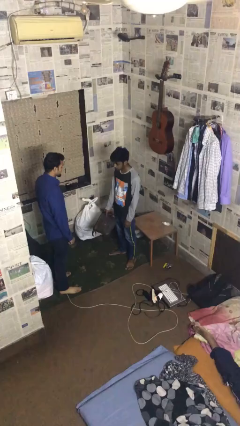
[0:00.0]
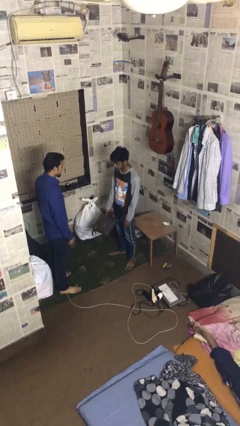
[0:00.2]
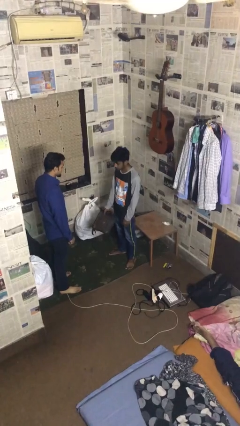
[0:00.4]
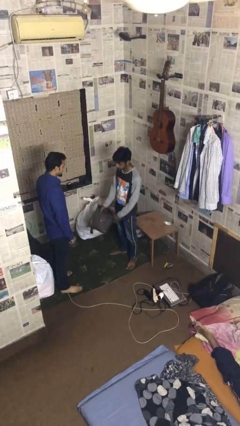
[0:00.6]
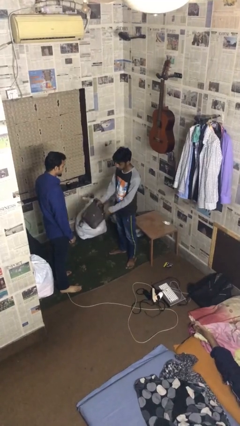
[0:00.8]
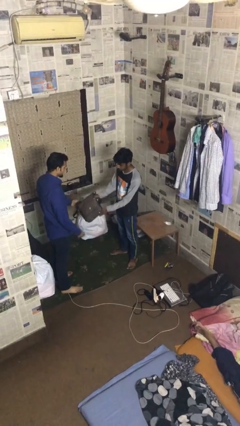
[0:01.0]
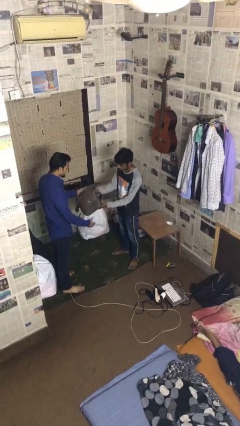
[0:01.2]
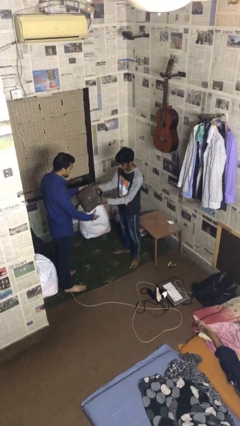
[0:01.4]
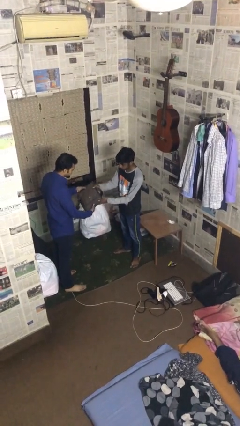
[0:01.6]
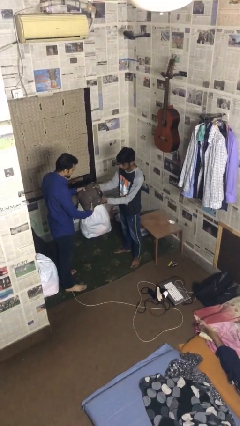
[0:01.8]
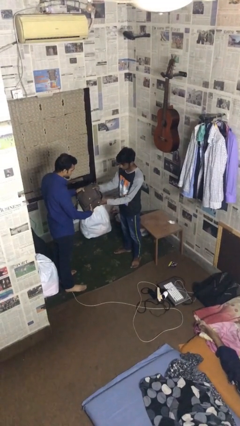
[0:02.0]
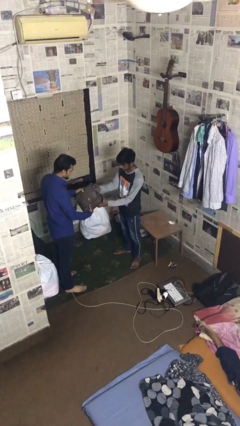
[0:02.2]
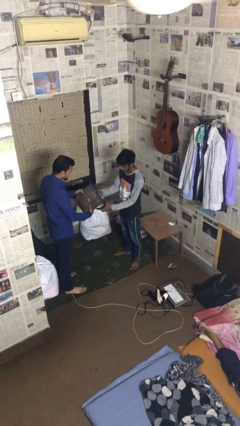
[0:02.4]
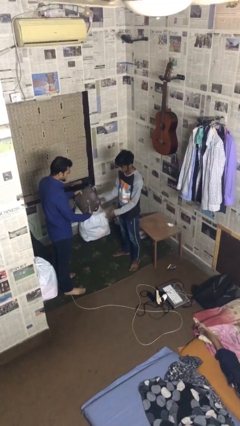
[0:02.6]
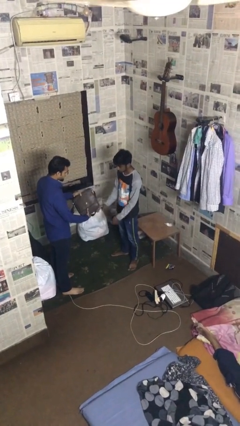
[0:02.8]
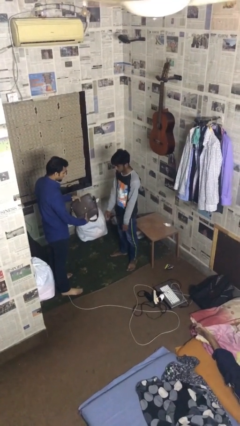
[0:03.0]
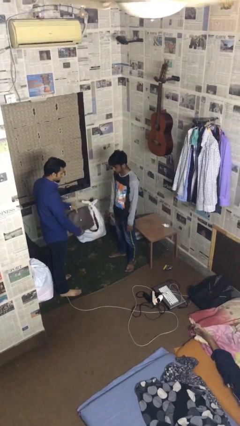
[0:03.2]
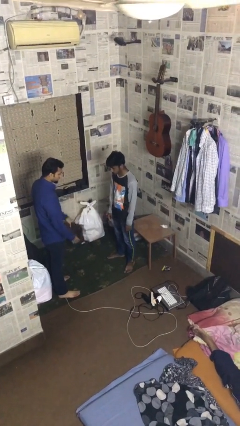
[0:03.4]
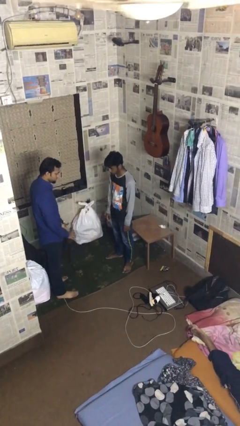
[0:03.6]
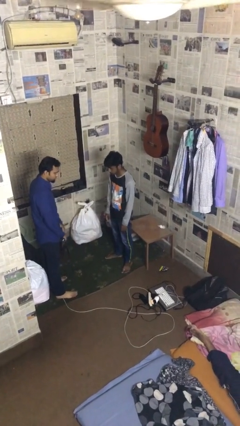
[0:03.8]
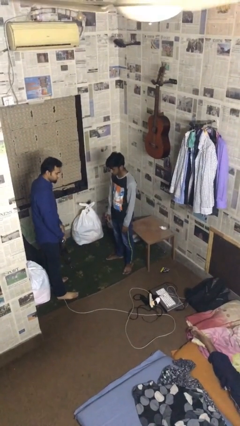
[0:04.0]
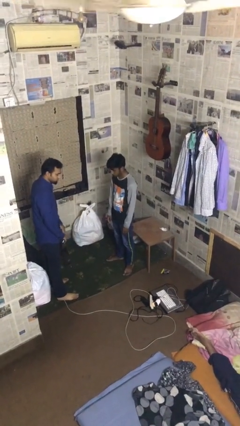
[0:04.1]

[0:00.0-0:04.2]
person transfers object to person

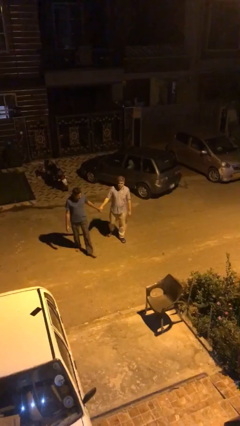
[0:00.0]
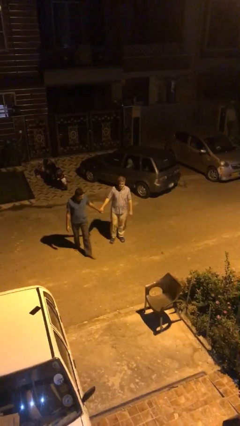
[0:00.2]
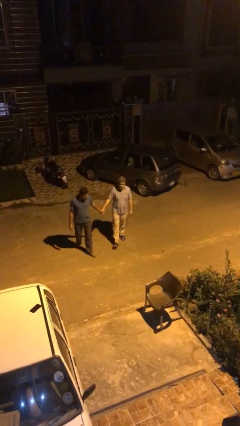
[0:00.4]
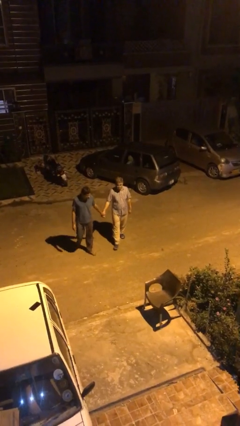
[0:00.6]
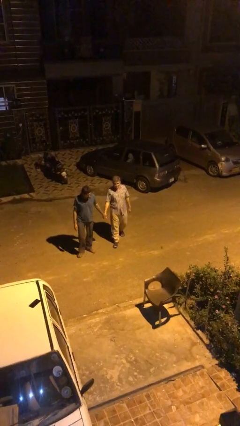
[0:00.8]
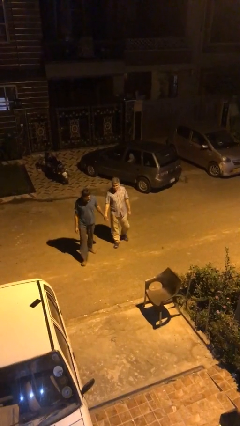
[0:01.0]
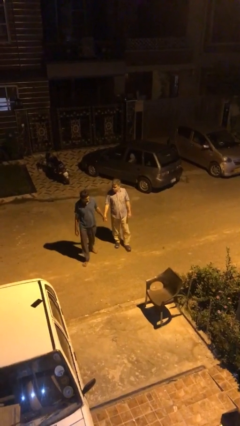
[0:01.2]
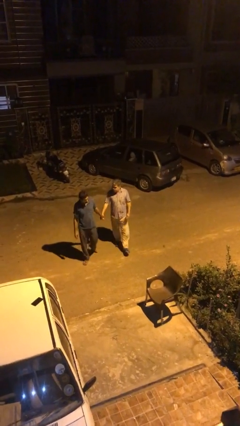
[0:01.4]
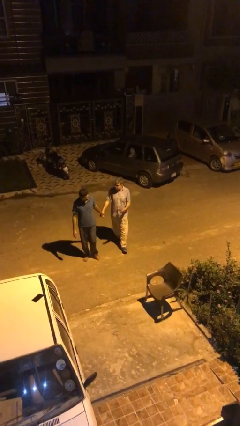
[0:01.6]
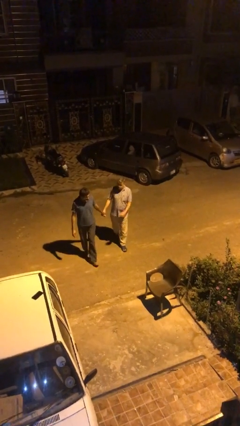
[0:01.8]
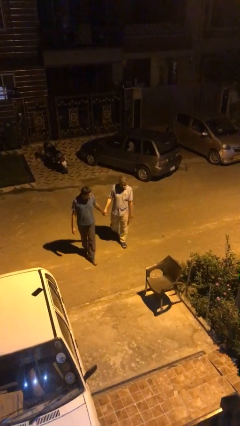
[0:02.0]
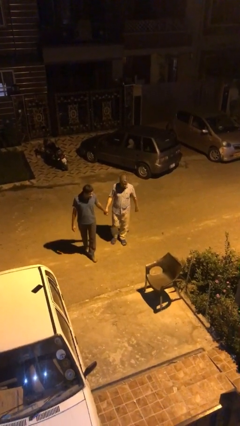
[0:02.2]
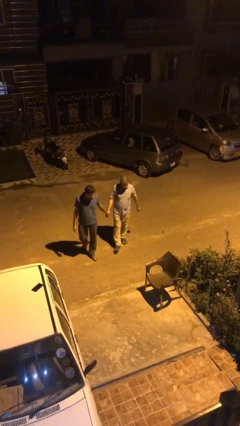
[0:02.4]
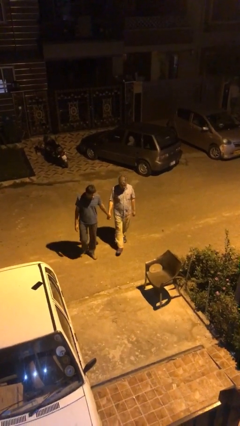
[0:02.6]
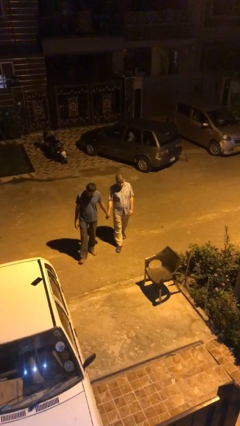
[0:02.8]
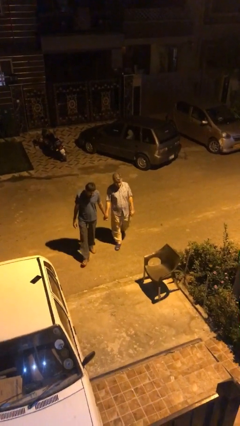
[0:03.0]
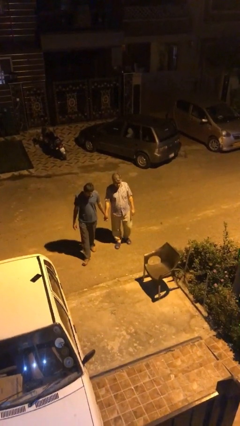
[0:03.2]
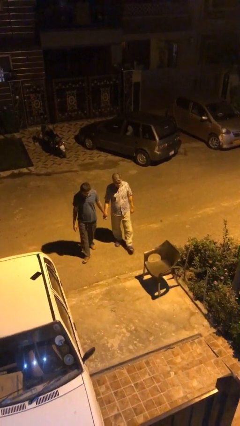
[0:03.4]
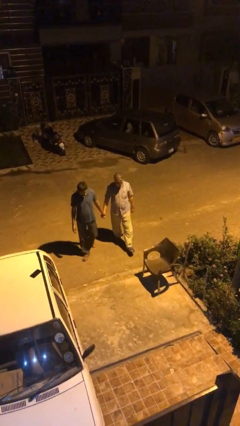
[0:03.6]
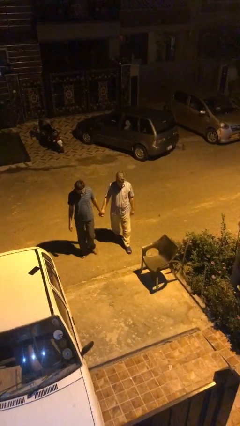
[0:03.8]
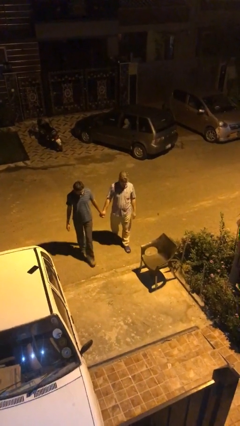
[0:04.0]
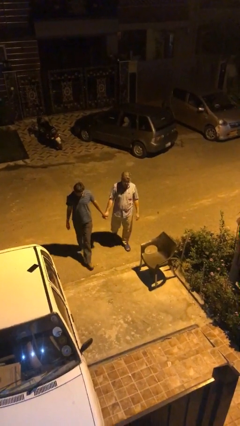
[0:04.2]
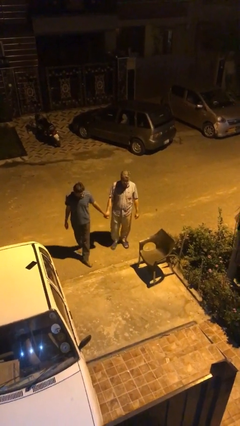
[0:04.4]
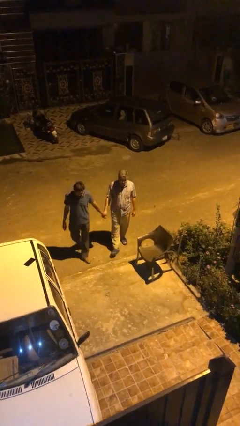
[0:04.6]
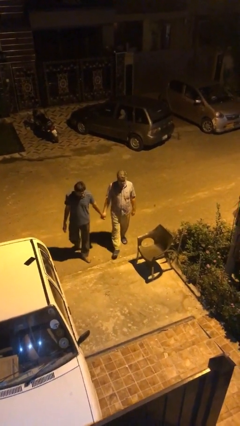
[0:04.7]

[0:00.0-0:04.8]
person holds hand

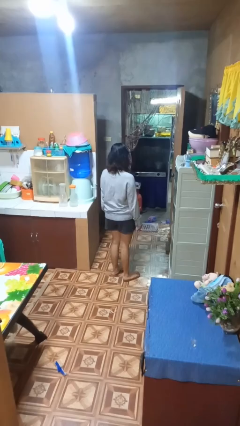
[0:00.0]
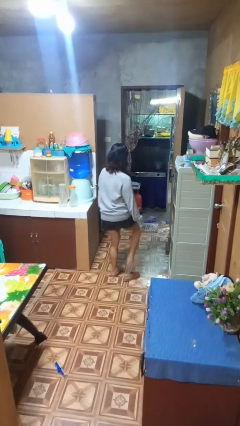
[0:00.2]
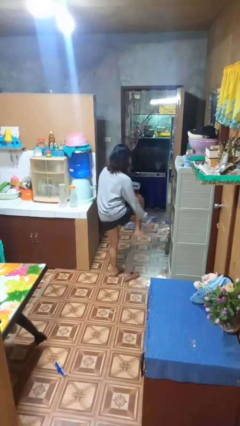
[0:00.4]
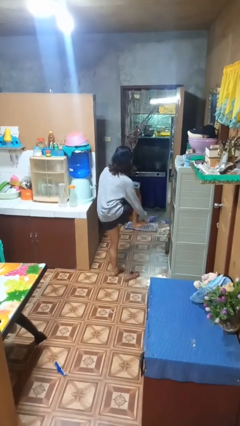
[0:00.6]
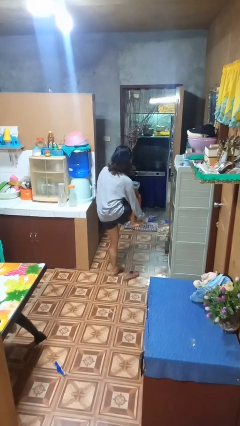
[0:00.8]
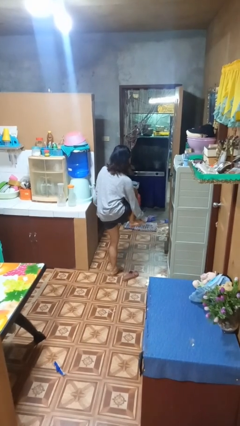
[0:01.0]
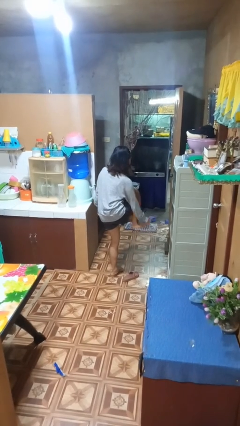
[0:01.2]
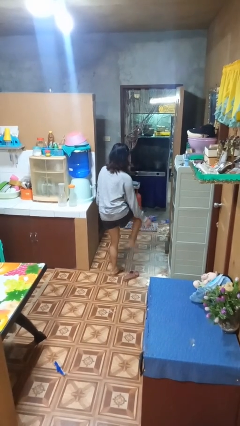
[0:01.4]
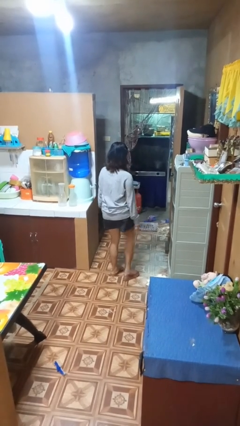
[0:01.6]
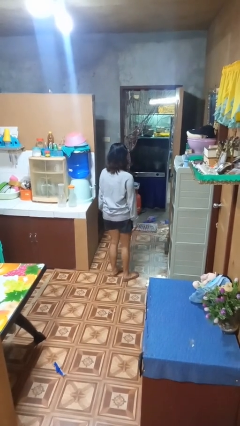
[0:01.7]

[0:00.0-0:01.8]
person rubs foot

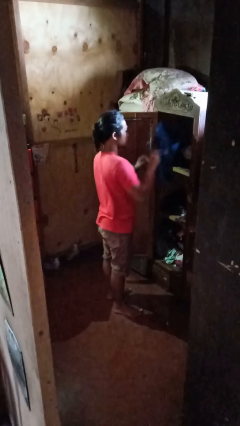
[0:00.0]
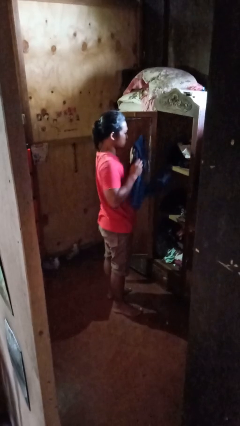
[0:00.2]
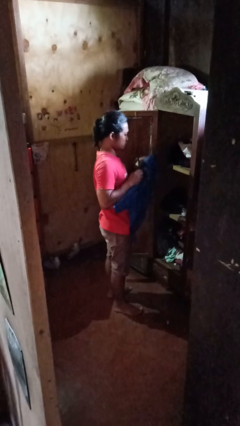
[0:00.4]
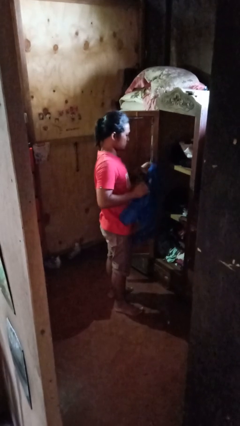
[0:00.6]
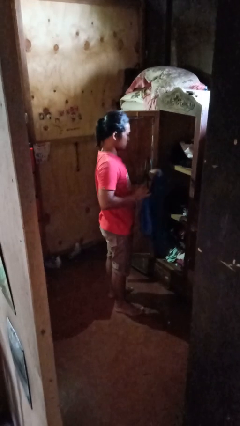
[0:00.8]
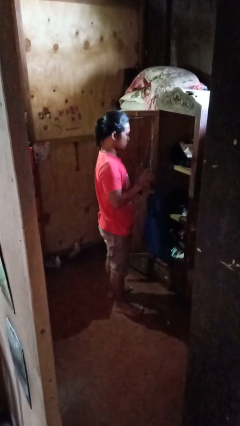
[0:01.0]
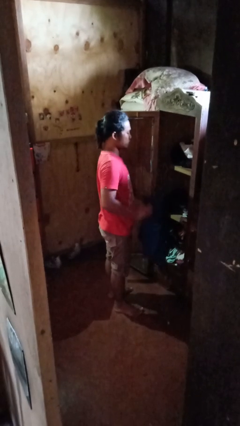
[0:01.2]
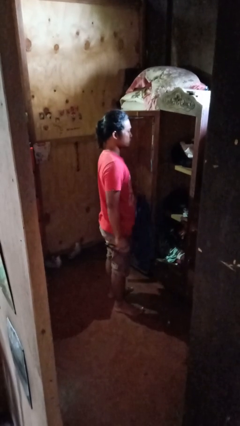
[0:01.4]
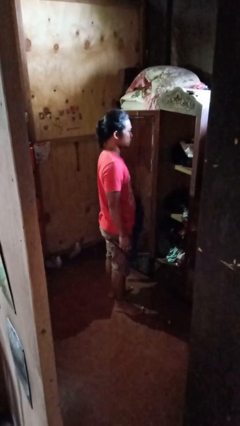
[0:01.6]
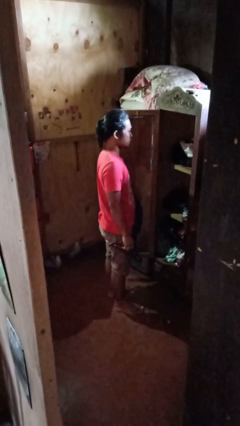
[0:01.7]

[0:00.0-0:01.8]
person takes clothes from closet

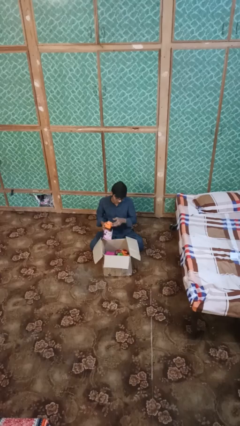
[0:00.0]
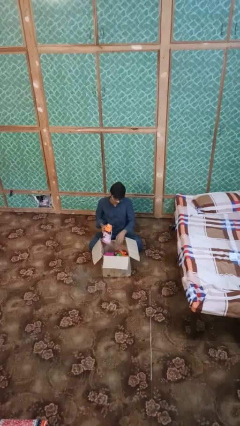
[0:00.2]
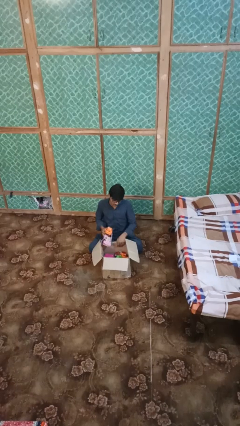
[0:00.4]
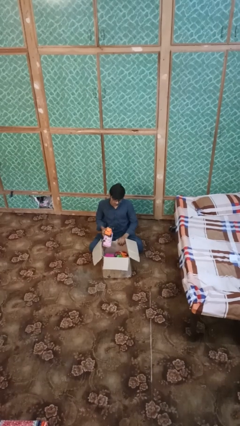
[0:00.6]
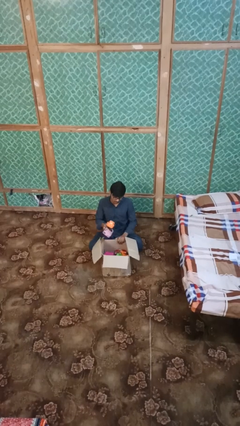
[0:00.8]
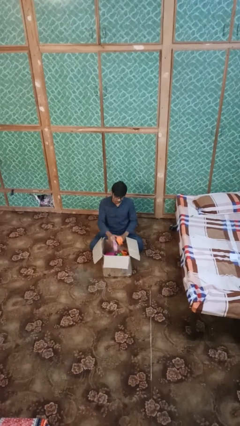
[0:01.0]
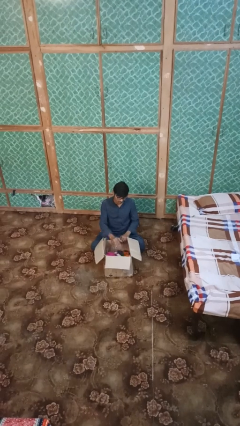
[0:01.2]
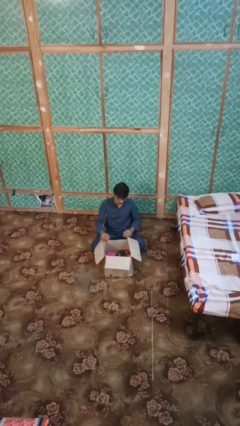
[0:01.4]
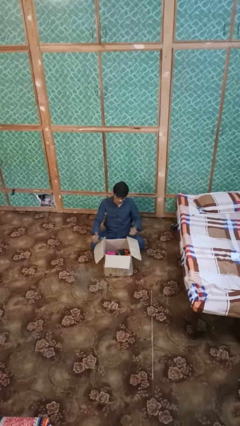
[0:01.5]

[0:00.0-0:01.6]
person puts object into box

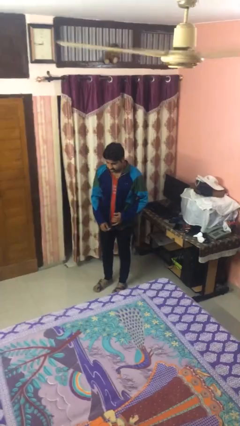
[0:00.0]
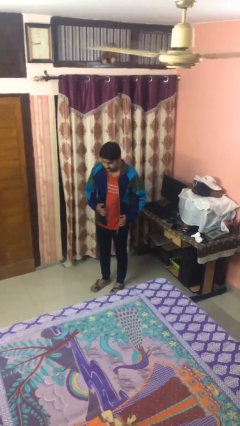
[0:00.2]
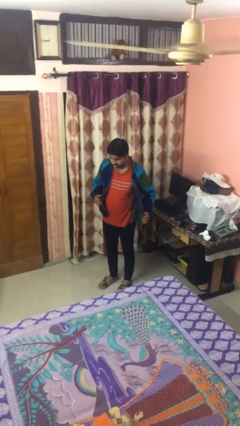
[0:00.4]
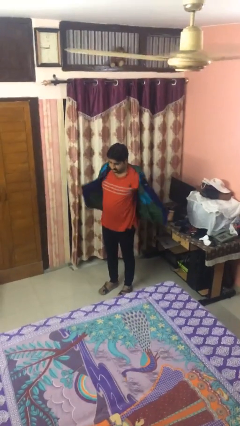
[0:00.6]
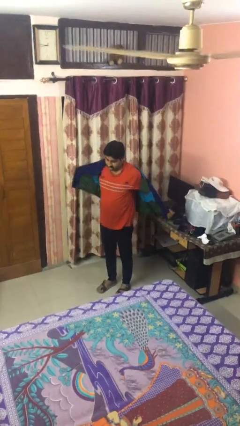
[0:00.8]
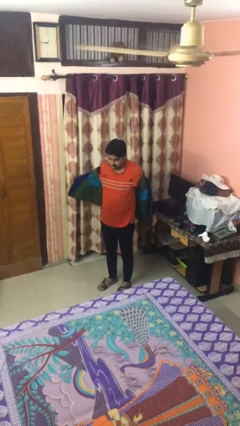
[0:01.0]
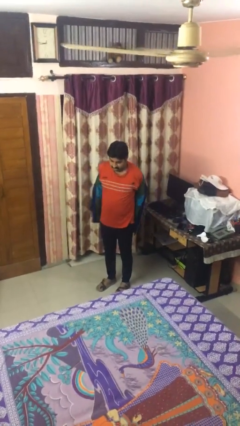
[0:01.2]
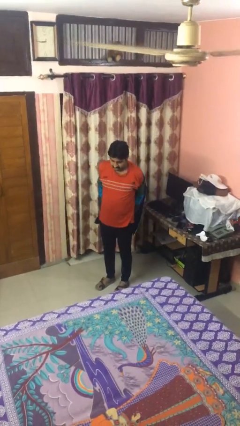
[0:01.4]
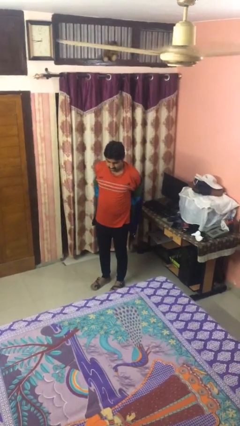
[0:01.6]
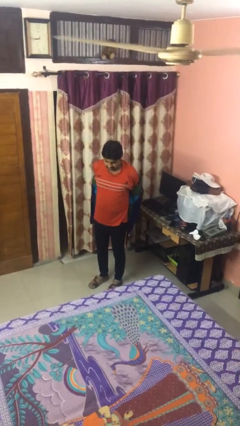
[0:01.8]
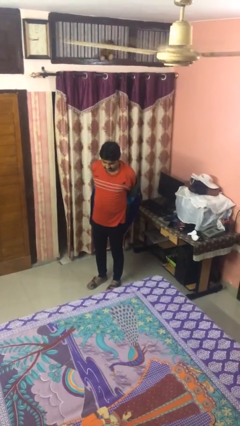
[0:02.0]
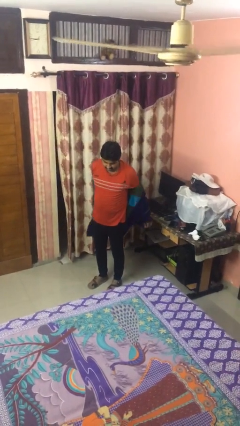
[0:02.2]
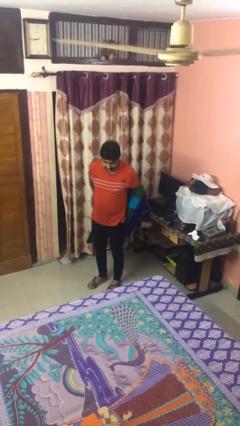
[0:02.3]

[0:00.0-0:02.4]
person takes off jacket

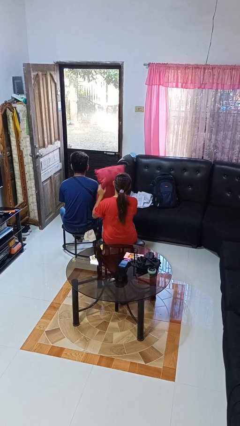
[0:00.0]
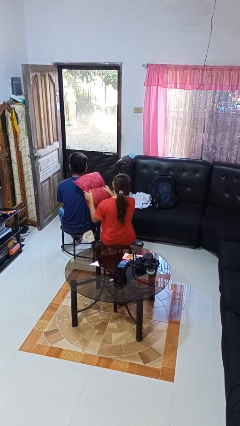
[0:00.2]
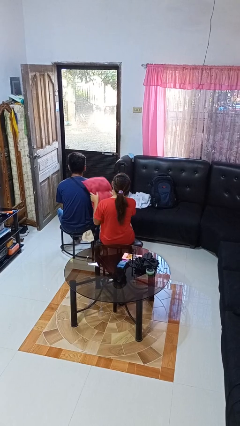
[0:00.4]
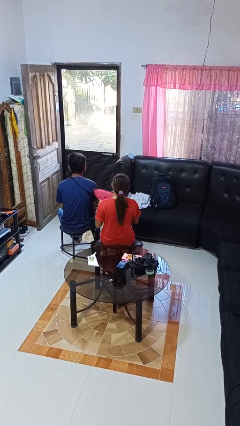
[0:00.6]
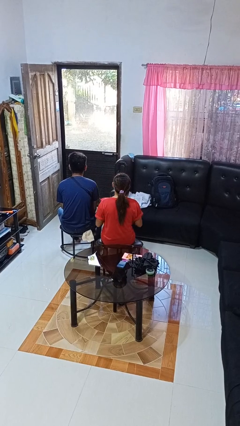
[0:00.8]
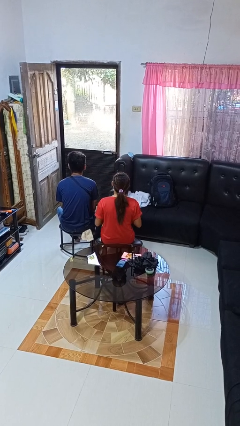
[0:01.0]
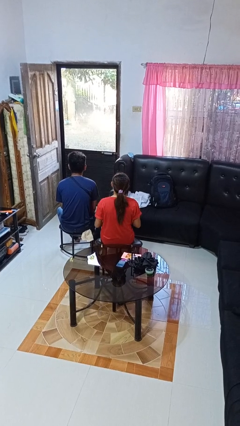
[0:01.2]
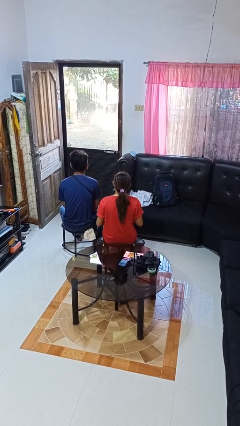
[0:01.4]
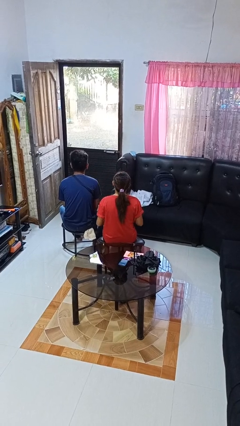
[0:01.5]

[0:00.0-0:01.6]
person hits person with pillow
